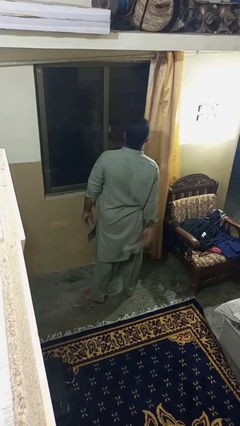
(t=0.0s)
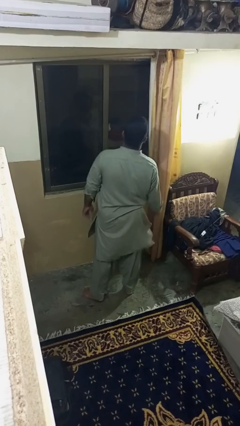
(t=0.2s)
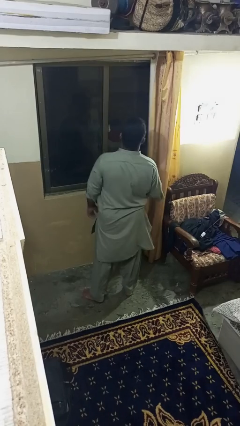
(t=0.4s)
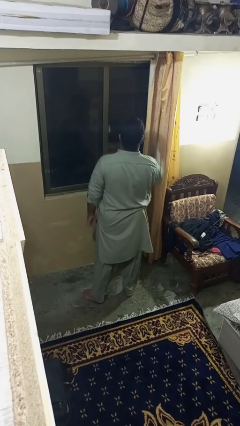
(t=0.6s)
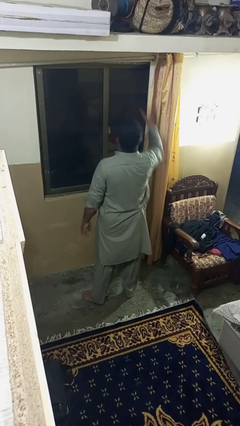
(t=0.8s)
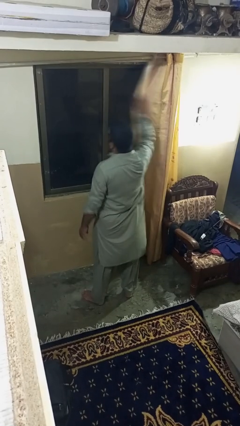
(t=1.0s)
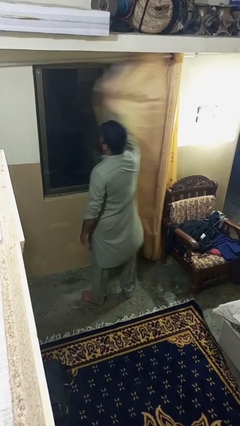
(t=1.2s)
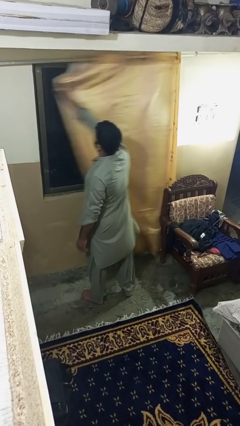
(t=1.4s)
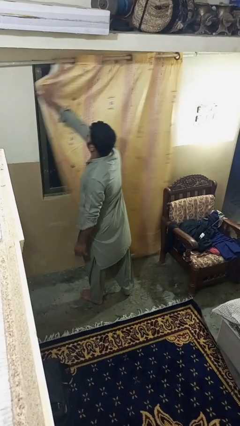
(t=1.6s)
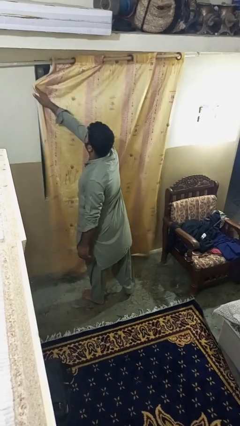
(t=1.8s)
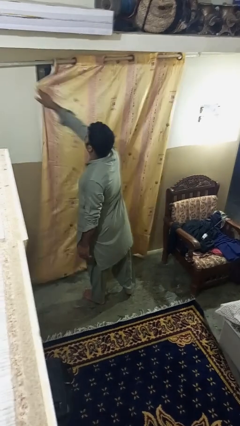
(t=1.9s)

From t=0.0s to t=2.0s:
person closes curtains

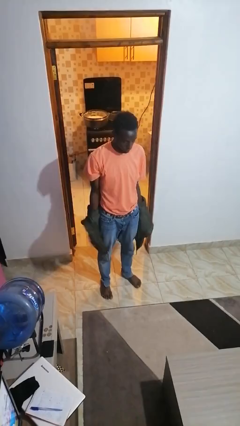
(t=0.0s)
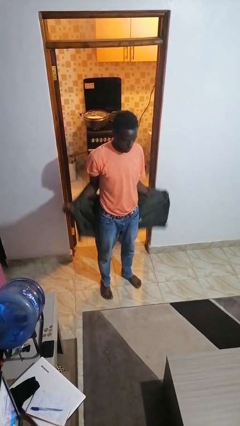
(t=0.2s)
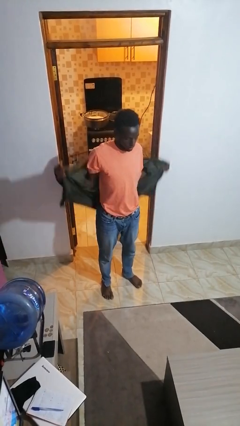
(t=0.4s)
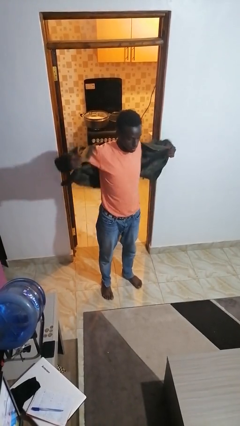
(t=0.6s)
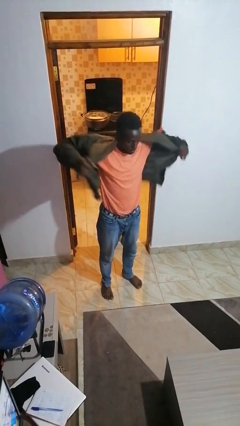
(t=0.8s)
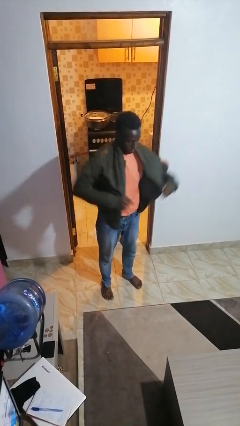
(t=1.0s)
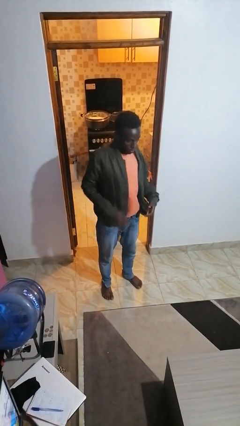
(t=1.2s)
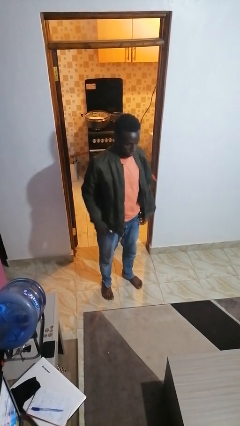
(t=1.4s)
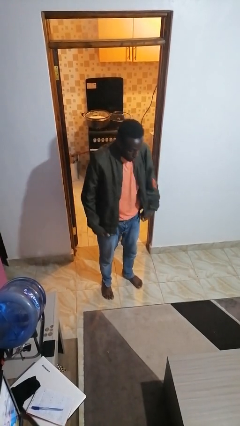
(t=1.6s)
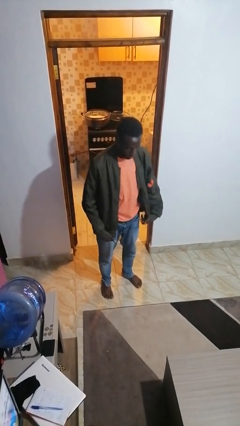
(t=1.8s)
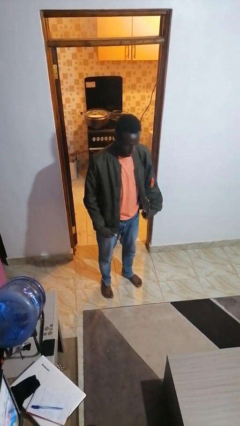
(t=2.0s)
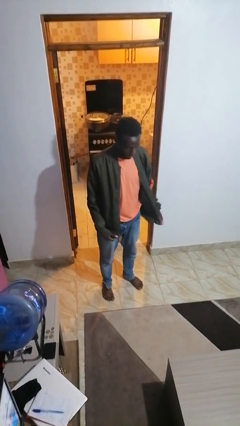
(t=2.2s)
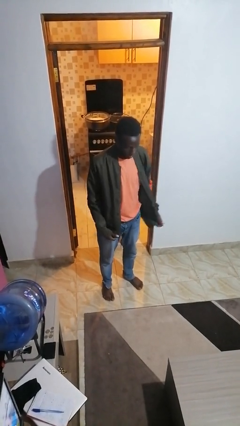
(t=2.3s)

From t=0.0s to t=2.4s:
person puts on jacket

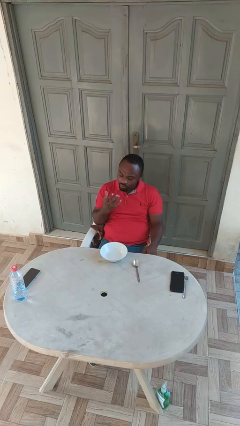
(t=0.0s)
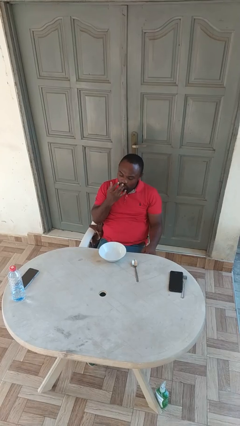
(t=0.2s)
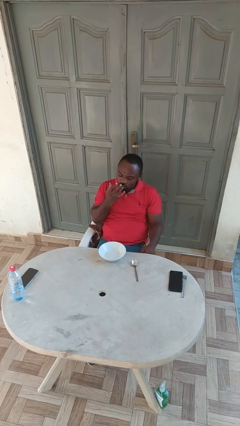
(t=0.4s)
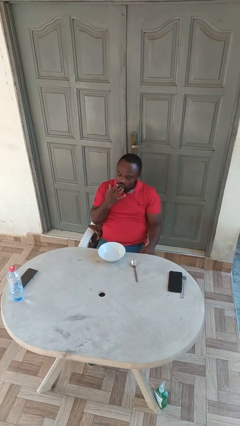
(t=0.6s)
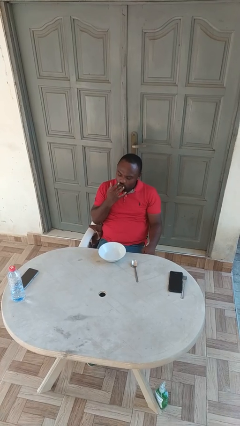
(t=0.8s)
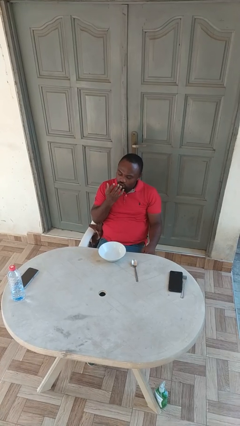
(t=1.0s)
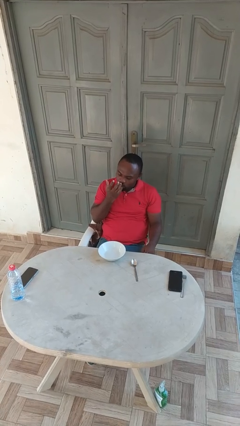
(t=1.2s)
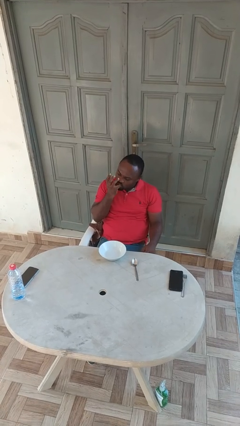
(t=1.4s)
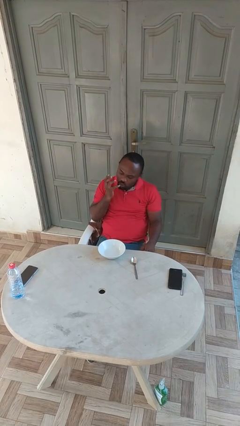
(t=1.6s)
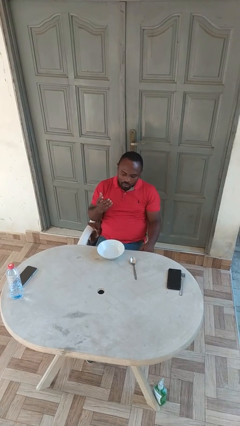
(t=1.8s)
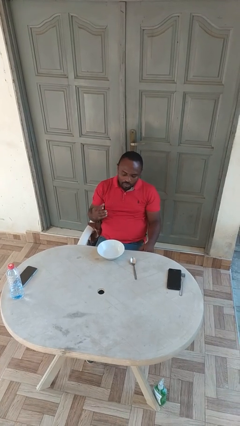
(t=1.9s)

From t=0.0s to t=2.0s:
person licks fingers

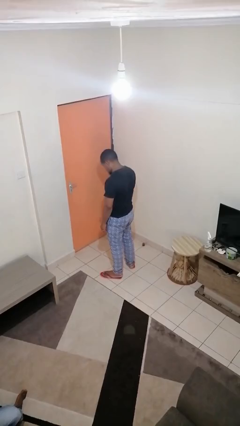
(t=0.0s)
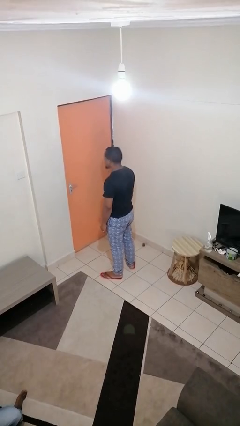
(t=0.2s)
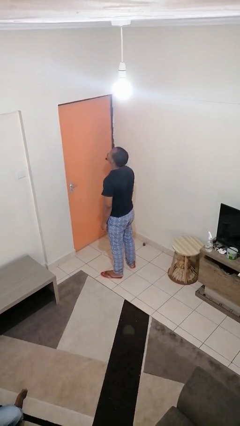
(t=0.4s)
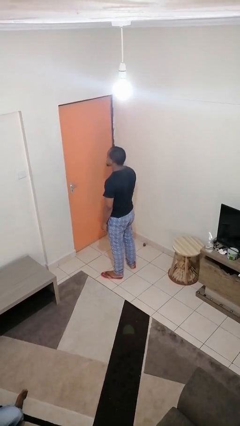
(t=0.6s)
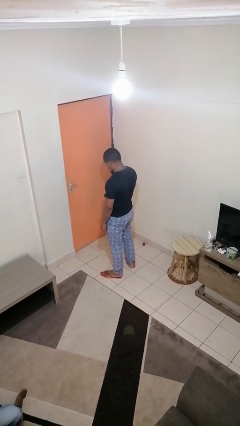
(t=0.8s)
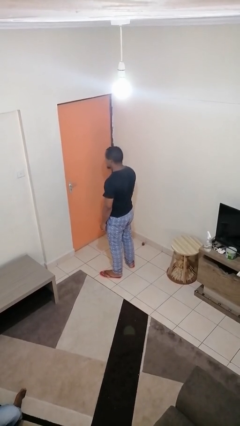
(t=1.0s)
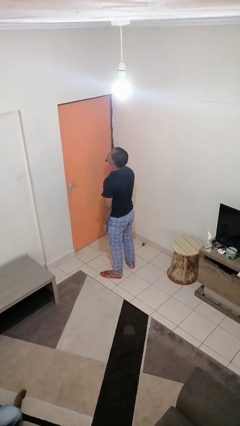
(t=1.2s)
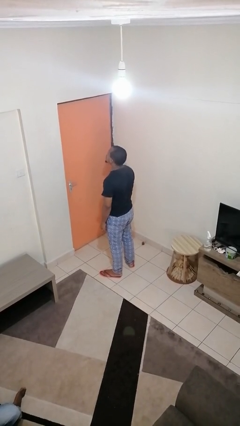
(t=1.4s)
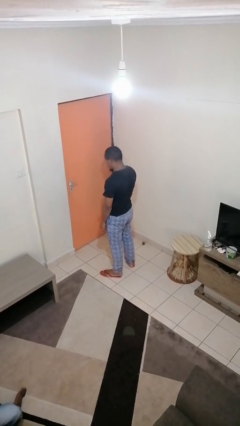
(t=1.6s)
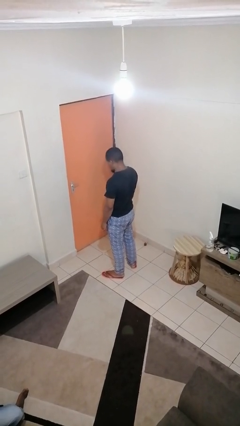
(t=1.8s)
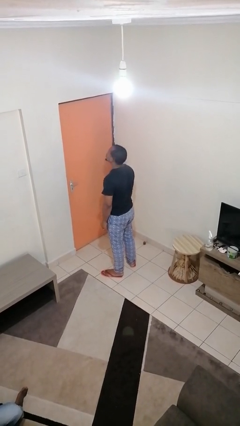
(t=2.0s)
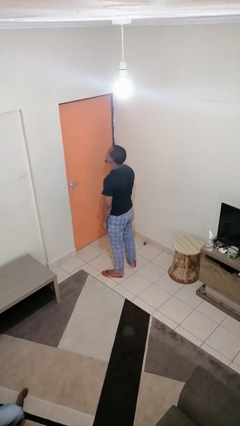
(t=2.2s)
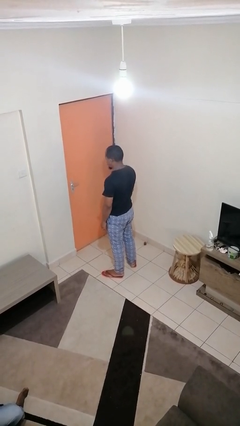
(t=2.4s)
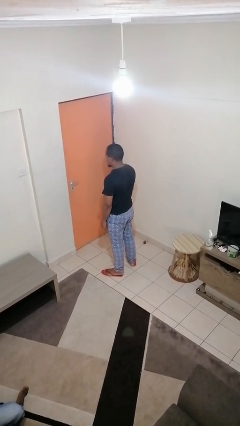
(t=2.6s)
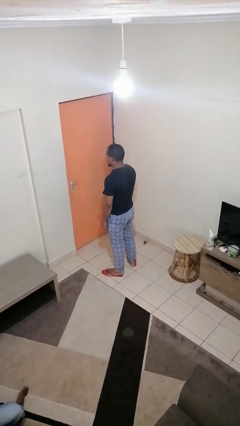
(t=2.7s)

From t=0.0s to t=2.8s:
person nods head

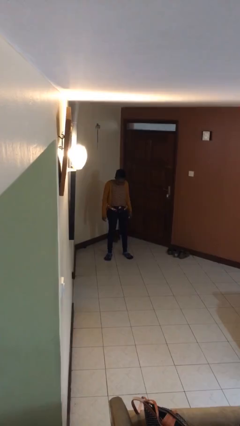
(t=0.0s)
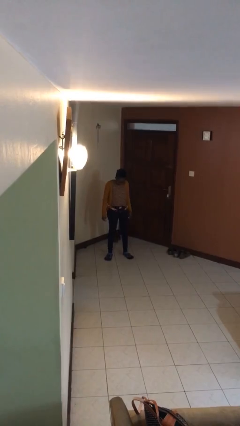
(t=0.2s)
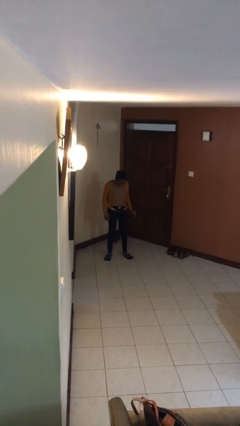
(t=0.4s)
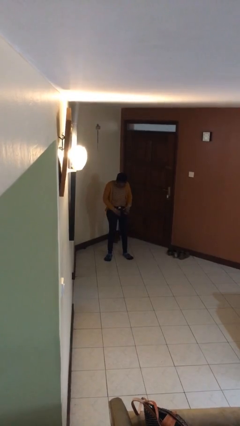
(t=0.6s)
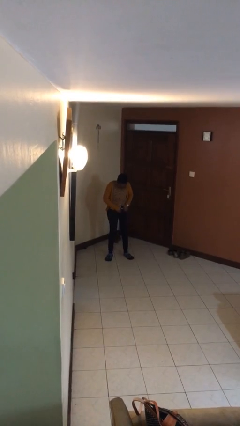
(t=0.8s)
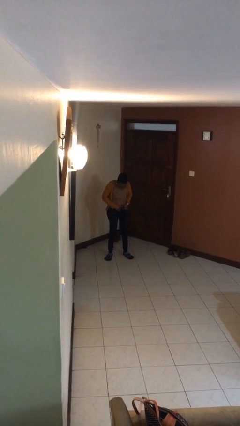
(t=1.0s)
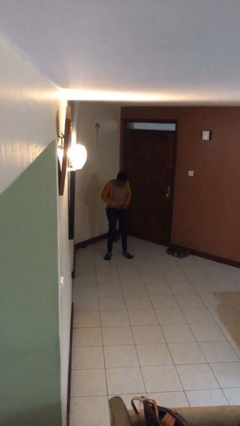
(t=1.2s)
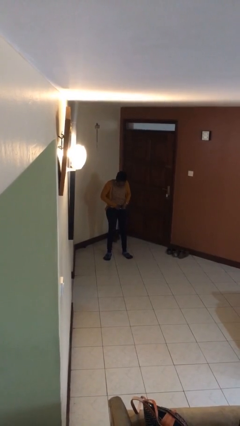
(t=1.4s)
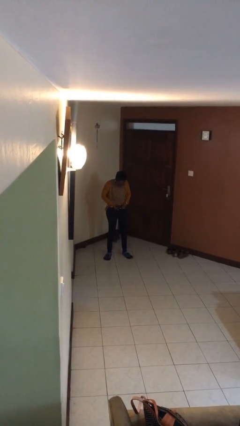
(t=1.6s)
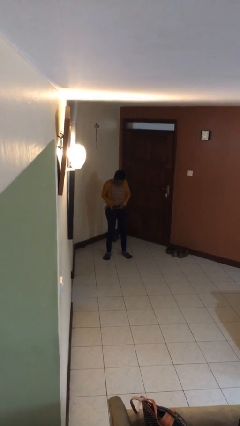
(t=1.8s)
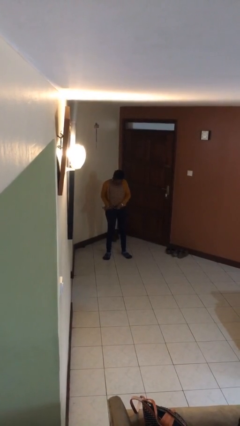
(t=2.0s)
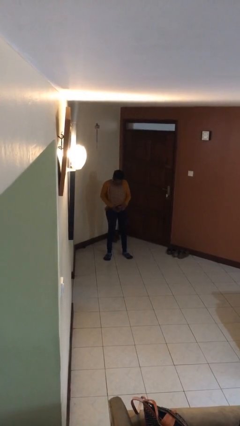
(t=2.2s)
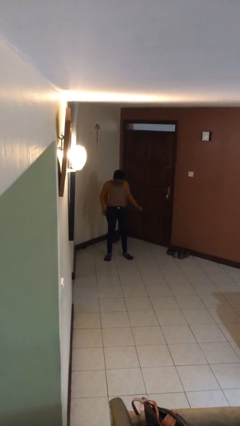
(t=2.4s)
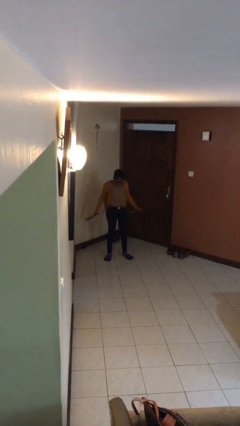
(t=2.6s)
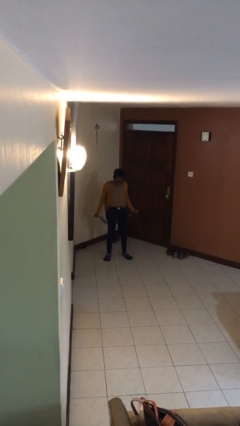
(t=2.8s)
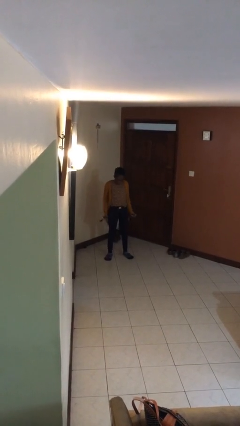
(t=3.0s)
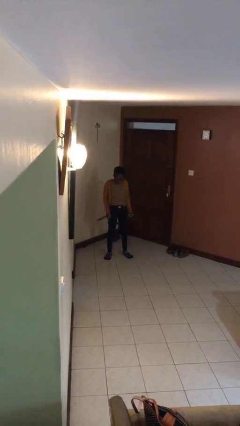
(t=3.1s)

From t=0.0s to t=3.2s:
person takes off belt

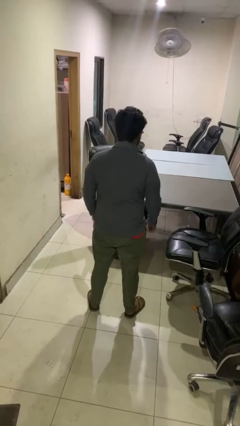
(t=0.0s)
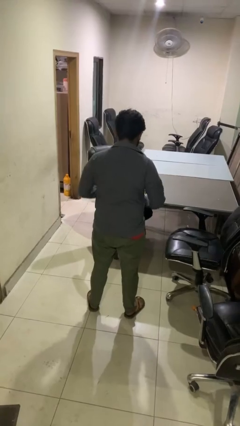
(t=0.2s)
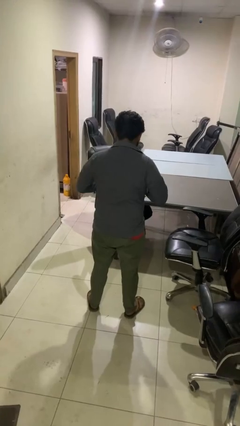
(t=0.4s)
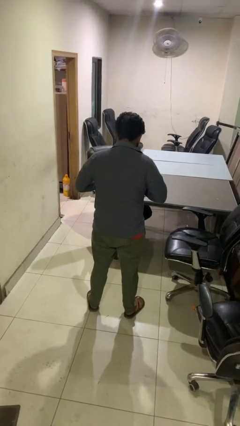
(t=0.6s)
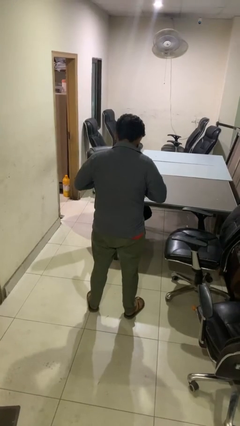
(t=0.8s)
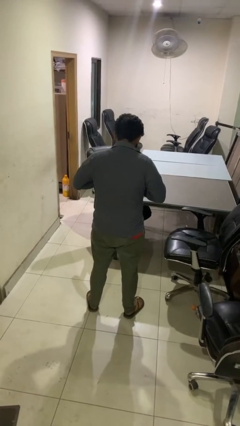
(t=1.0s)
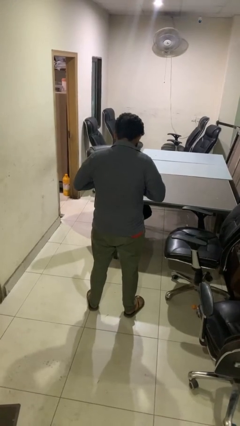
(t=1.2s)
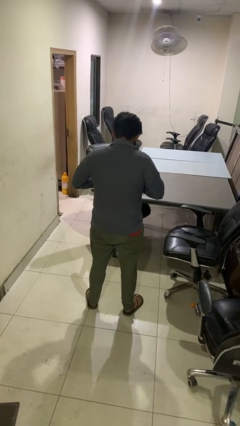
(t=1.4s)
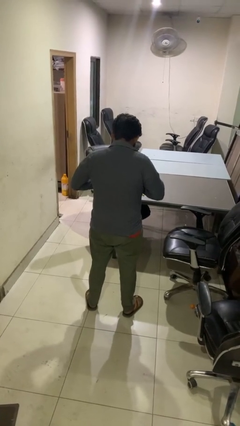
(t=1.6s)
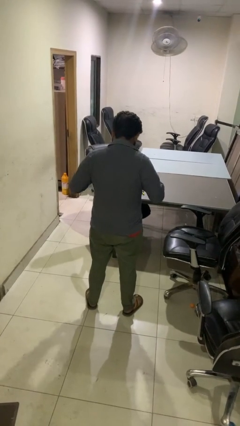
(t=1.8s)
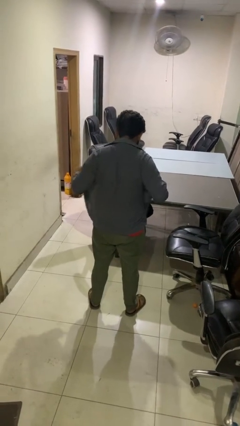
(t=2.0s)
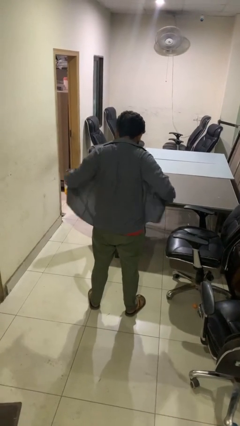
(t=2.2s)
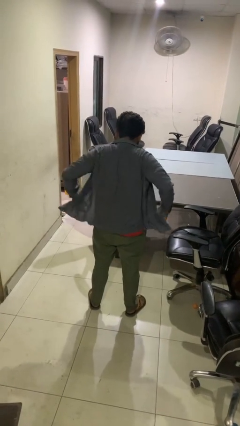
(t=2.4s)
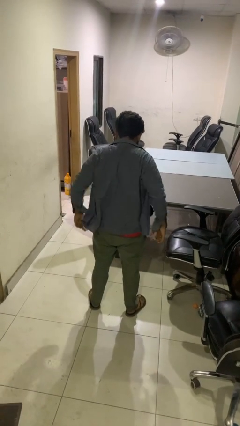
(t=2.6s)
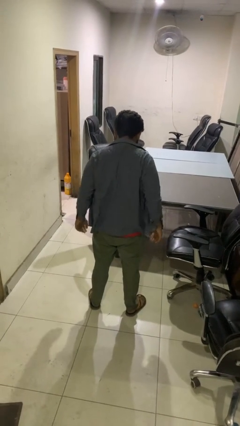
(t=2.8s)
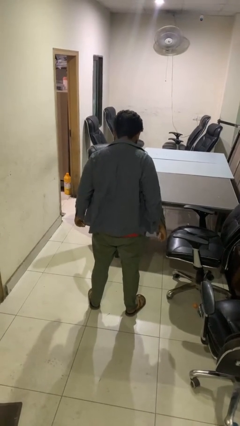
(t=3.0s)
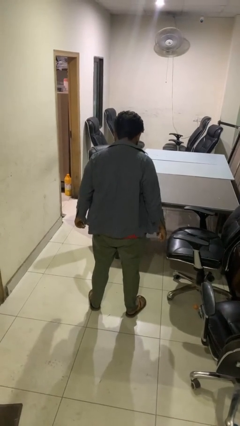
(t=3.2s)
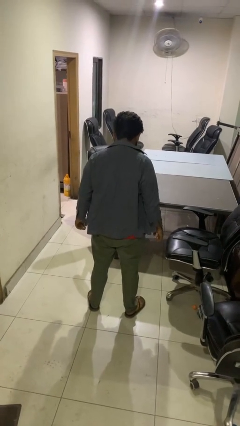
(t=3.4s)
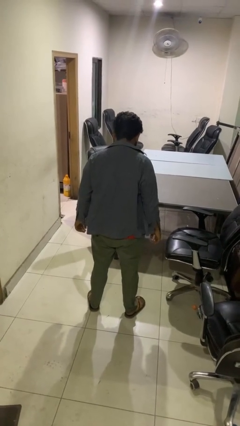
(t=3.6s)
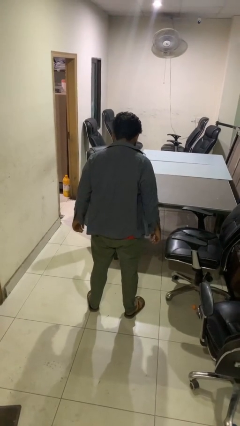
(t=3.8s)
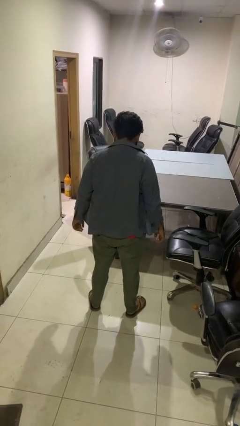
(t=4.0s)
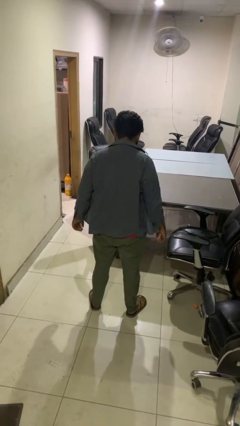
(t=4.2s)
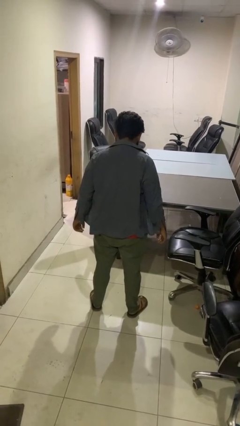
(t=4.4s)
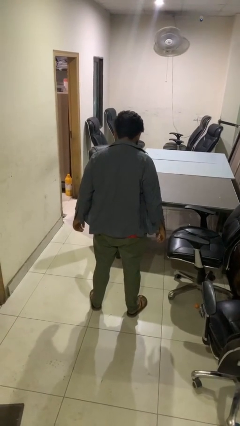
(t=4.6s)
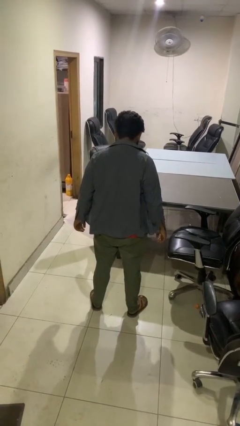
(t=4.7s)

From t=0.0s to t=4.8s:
person unbuttons shirt
